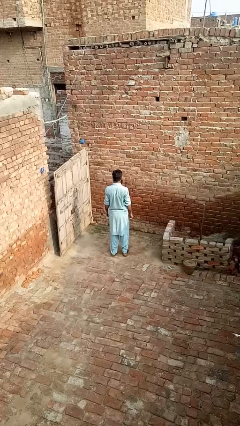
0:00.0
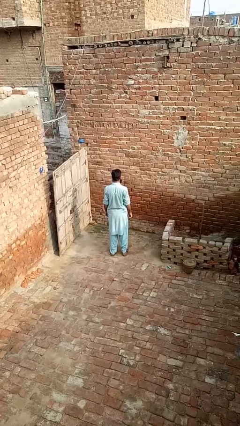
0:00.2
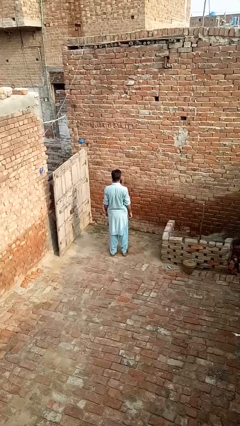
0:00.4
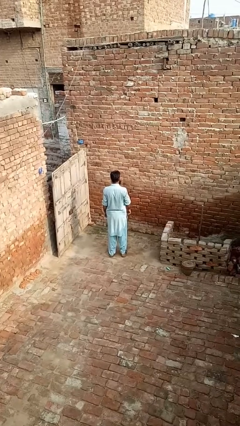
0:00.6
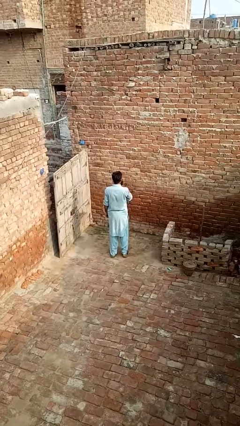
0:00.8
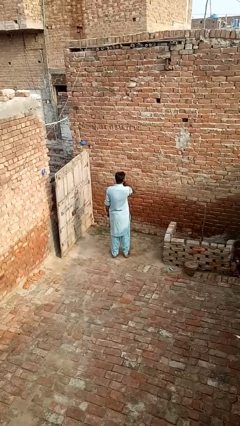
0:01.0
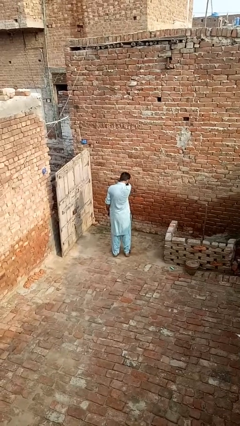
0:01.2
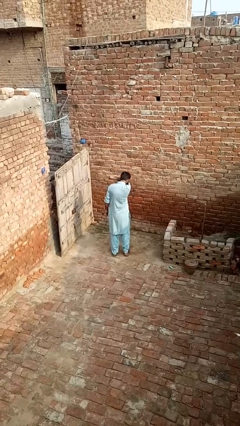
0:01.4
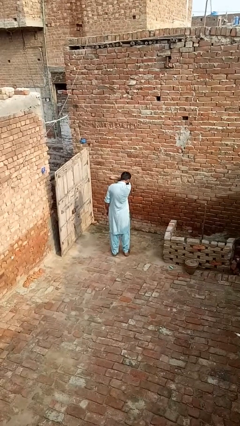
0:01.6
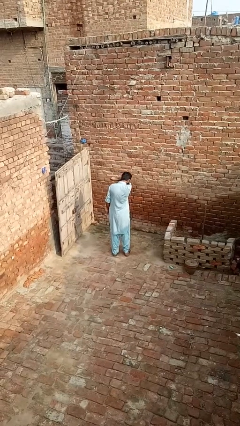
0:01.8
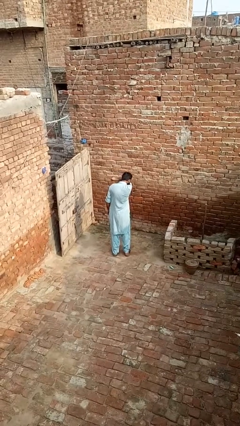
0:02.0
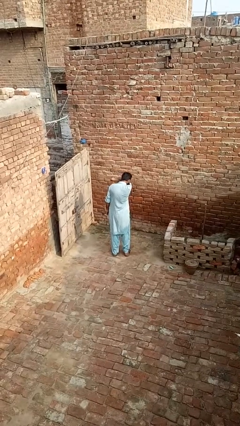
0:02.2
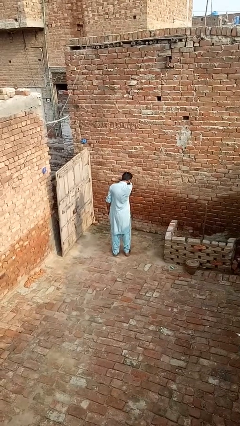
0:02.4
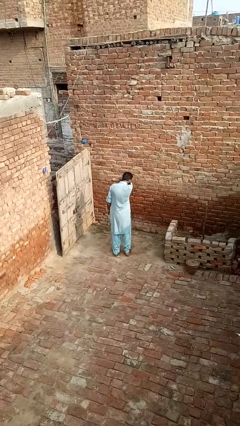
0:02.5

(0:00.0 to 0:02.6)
person sneezes into arm

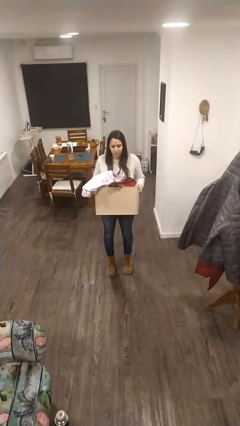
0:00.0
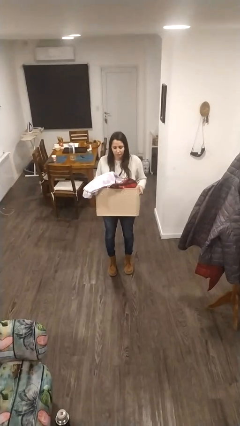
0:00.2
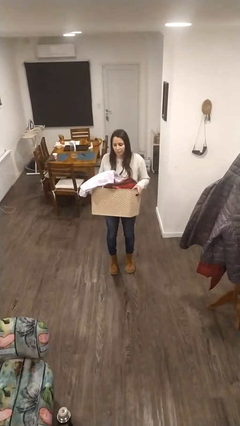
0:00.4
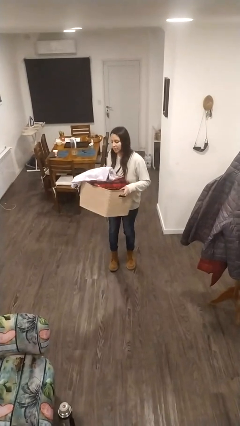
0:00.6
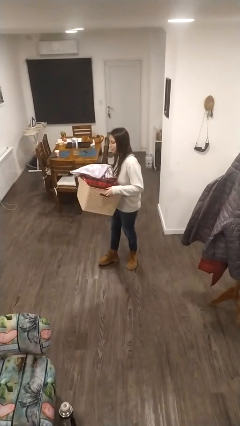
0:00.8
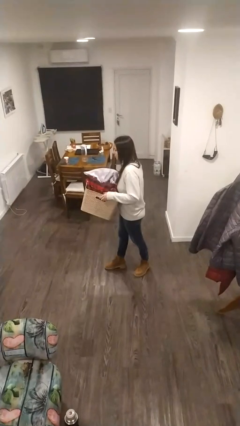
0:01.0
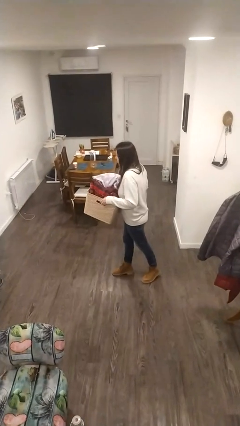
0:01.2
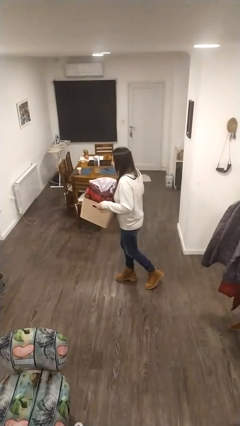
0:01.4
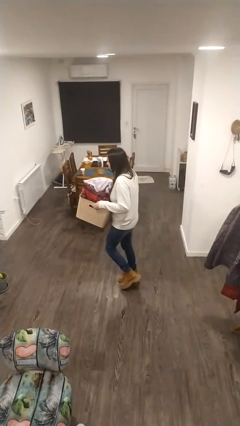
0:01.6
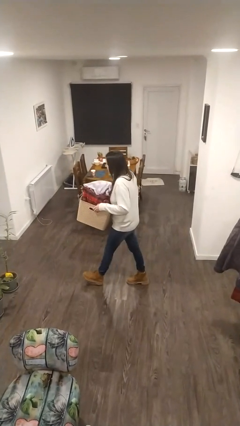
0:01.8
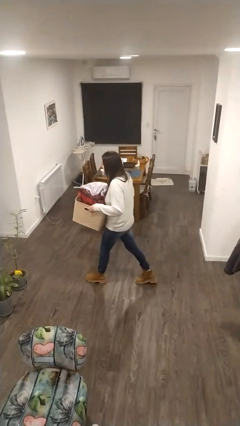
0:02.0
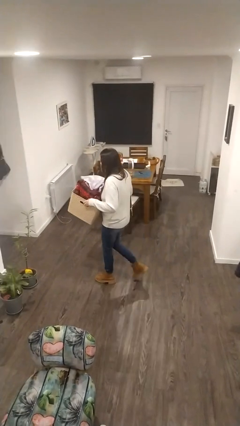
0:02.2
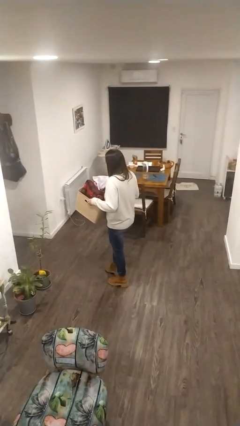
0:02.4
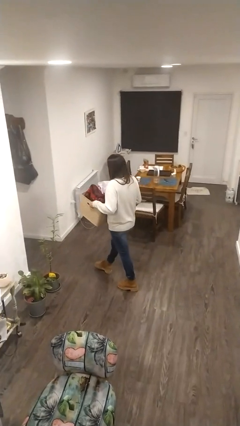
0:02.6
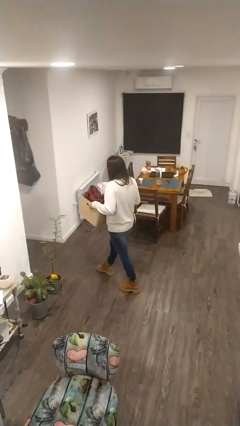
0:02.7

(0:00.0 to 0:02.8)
person carries laundry basket

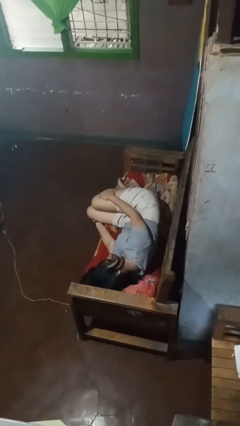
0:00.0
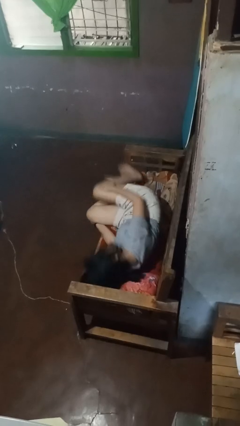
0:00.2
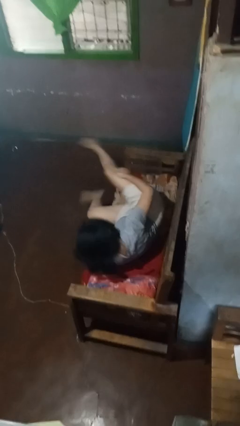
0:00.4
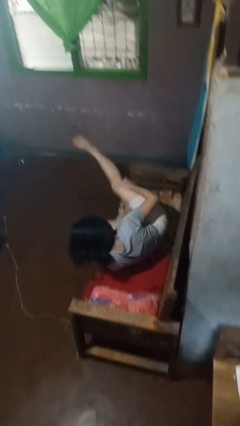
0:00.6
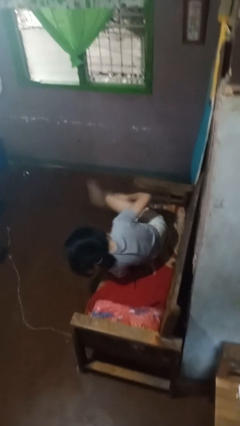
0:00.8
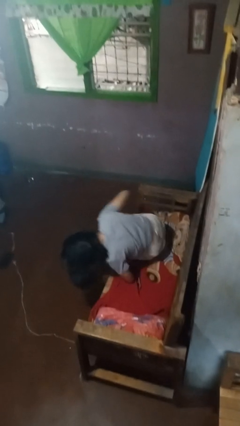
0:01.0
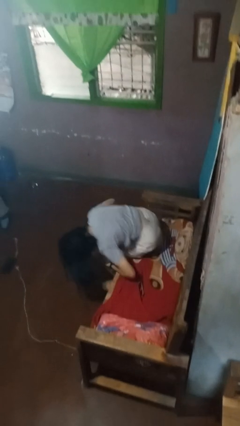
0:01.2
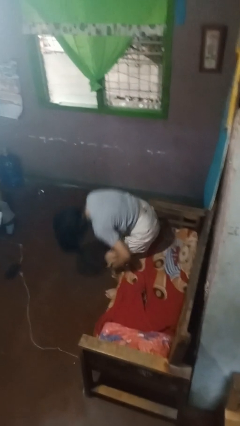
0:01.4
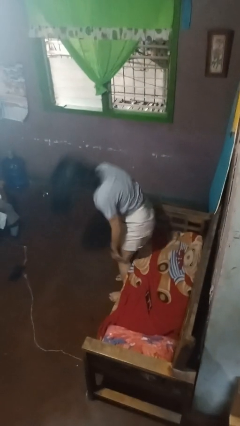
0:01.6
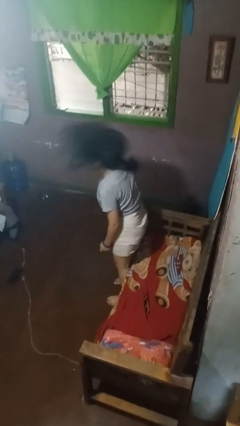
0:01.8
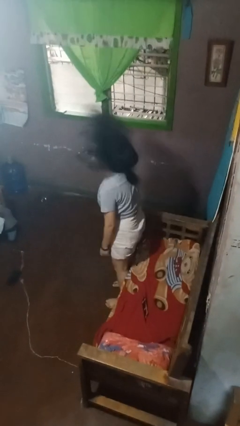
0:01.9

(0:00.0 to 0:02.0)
person stands up

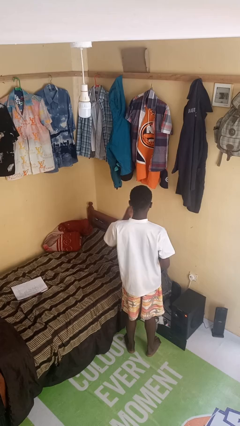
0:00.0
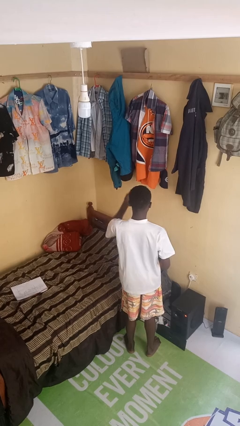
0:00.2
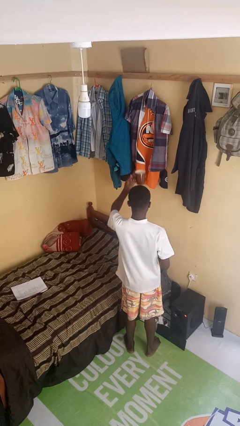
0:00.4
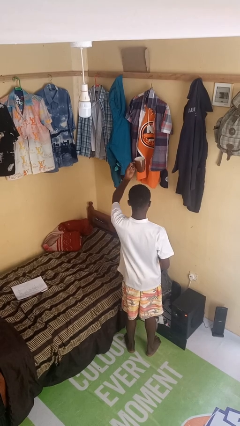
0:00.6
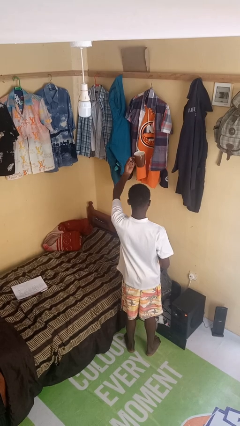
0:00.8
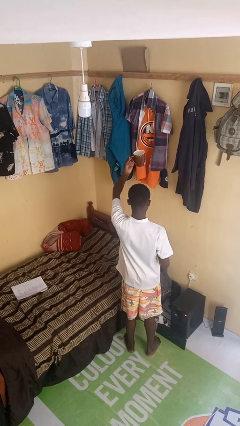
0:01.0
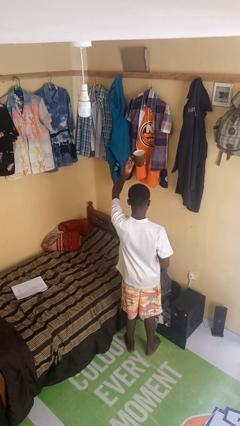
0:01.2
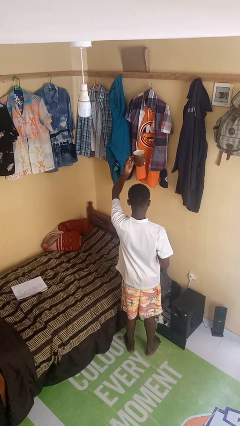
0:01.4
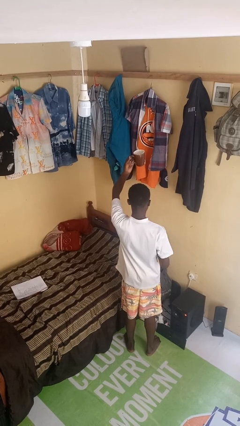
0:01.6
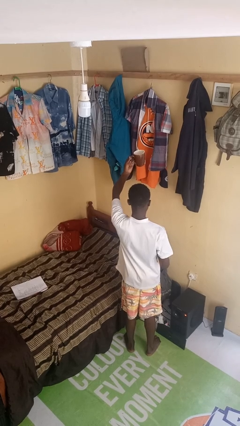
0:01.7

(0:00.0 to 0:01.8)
person holds object above head

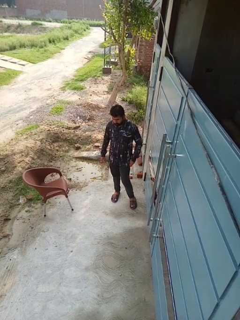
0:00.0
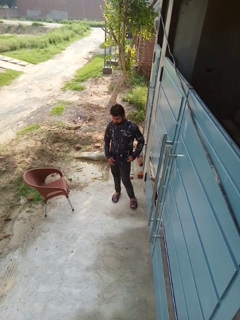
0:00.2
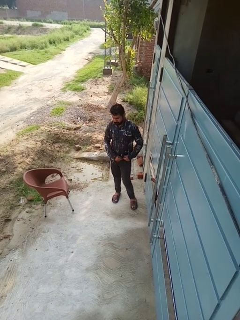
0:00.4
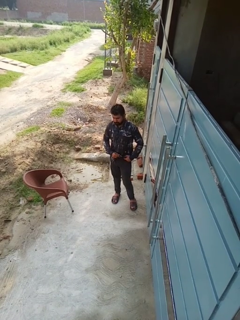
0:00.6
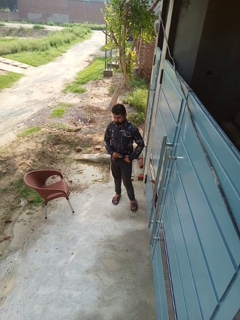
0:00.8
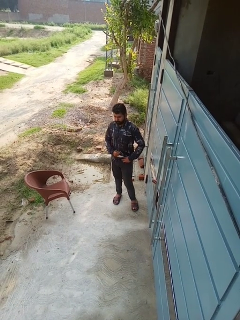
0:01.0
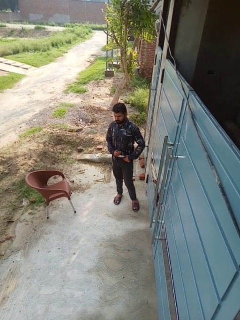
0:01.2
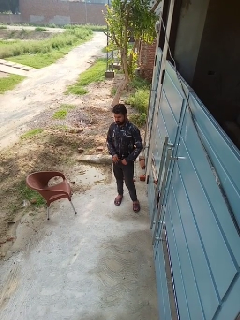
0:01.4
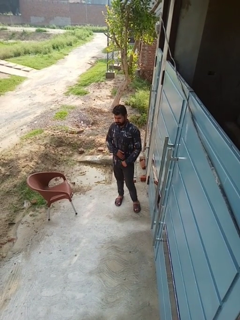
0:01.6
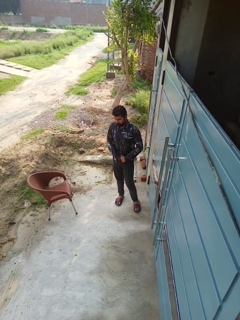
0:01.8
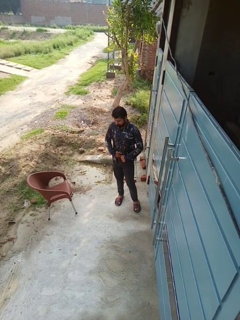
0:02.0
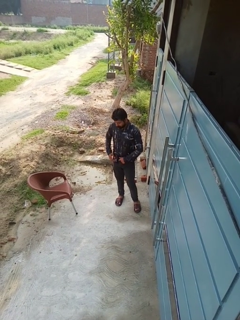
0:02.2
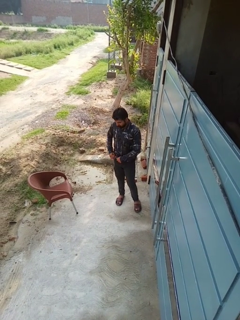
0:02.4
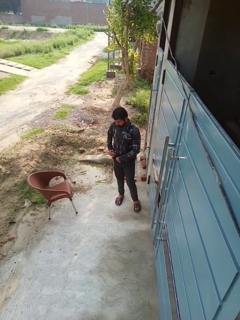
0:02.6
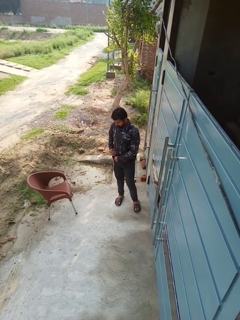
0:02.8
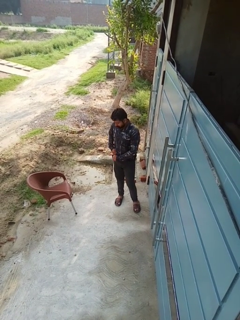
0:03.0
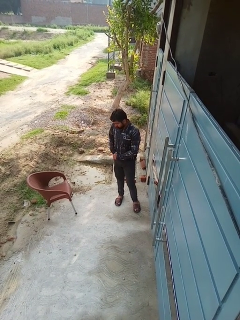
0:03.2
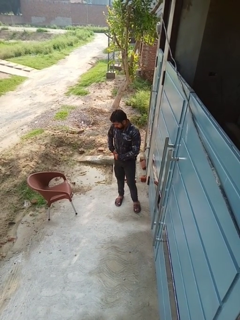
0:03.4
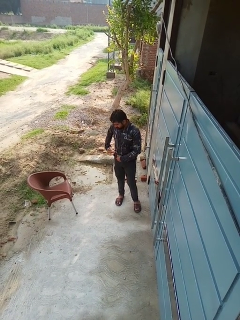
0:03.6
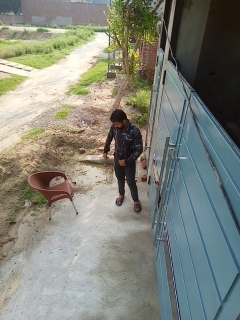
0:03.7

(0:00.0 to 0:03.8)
person tucks in shirt

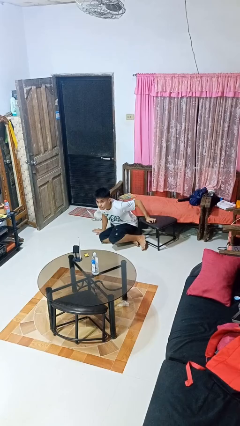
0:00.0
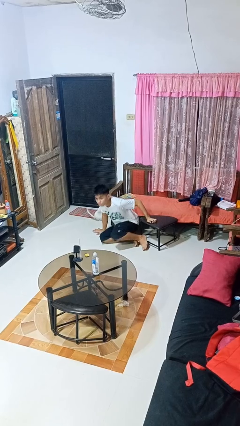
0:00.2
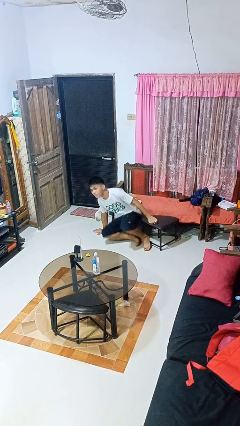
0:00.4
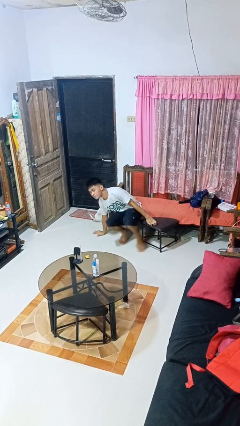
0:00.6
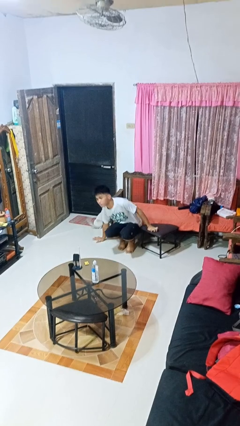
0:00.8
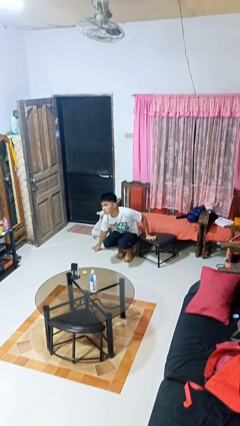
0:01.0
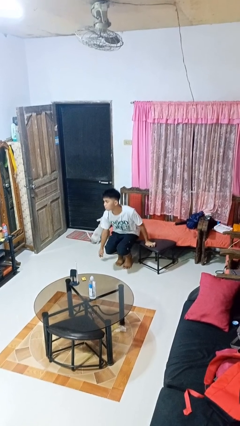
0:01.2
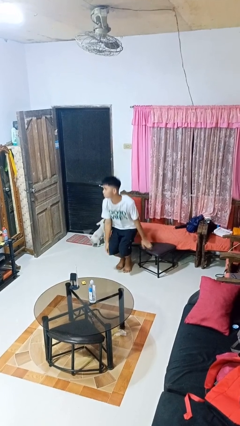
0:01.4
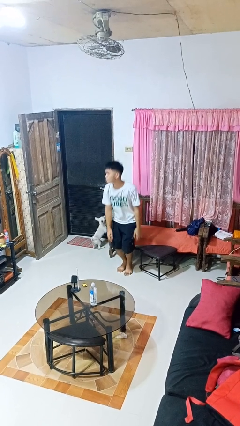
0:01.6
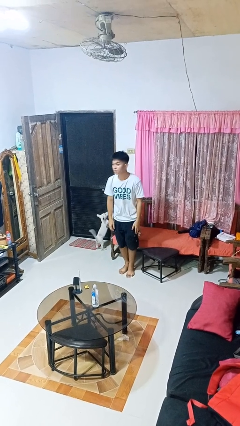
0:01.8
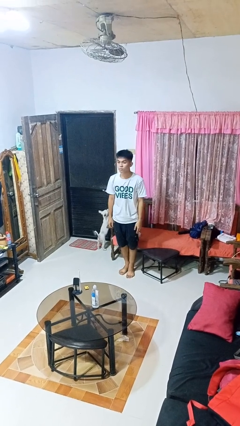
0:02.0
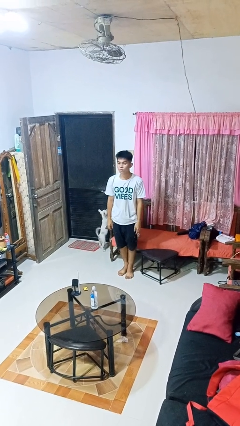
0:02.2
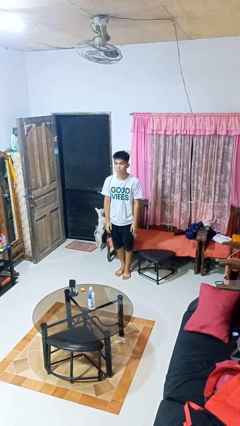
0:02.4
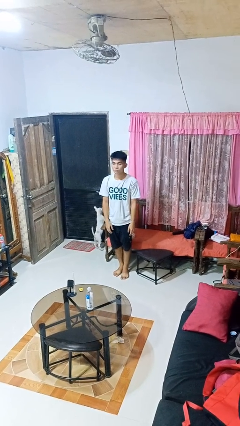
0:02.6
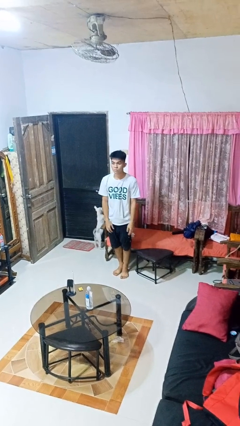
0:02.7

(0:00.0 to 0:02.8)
person stands up from floor

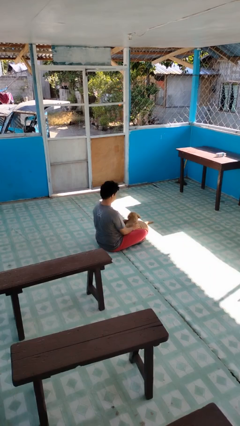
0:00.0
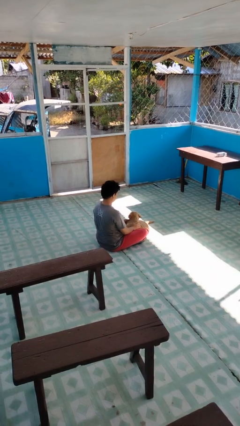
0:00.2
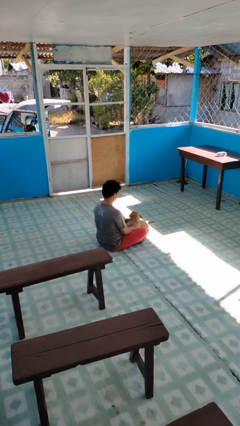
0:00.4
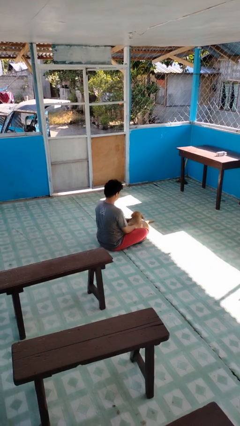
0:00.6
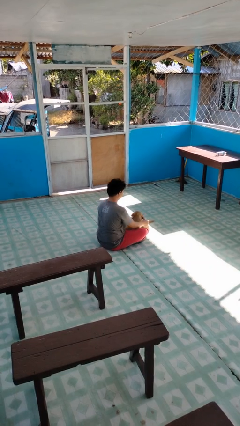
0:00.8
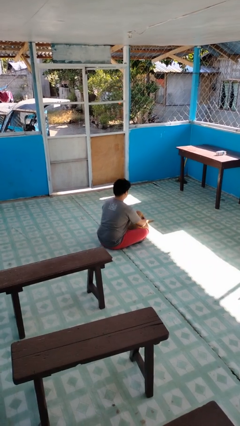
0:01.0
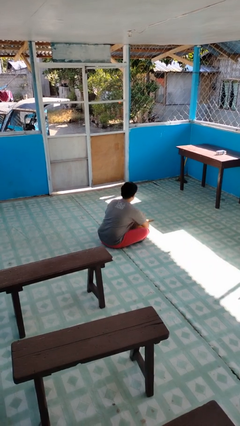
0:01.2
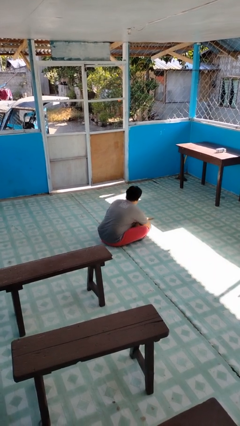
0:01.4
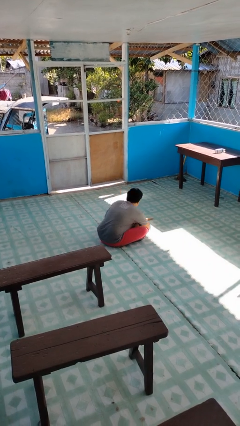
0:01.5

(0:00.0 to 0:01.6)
person hugs dog

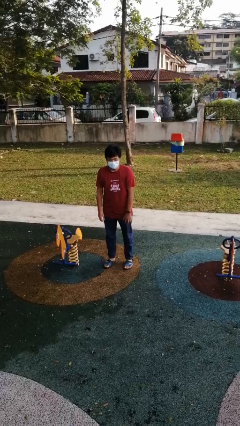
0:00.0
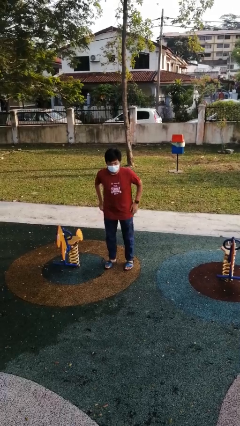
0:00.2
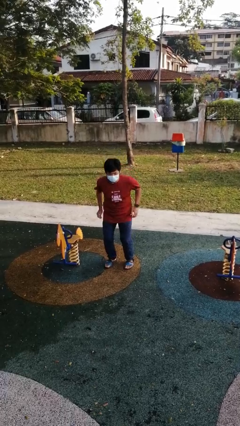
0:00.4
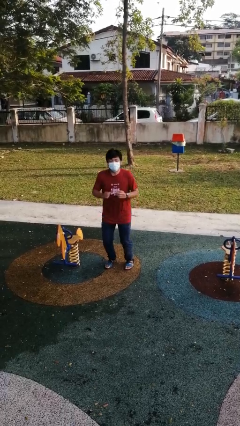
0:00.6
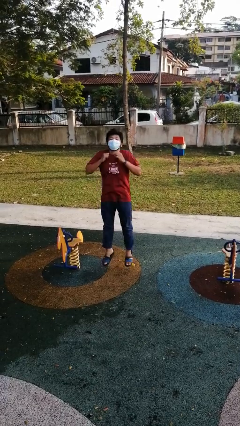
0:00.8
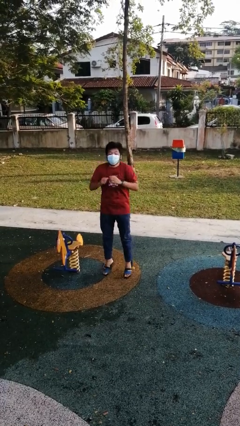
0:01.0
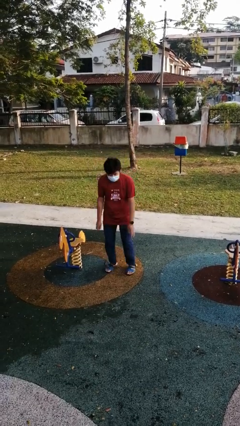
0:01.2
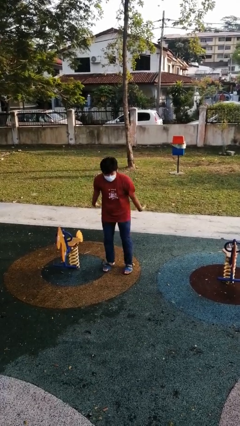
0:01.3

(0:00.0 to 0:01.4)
person jumps
